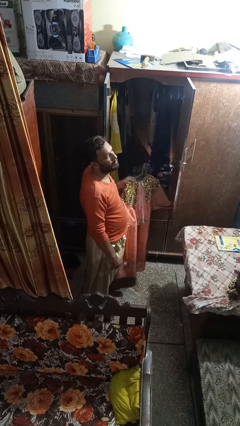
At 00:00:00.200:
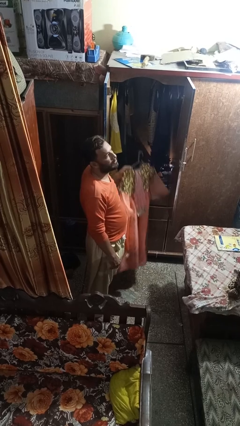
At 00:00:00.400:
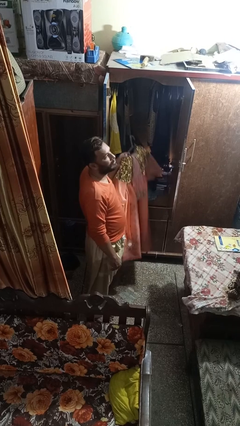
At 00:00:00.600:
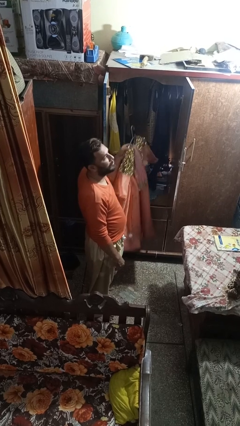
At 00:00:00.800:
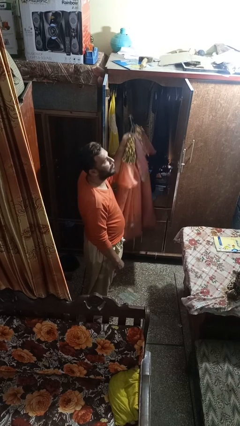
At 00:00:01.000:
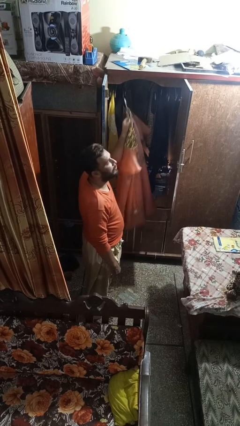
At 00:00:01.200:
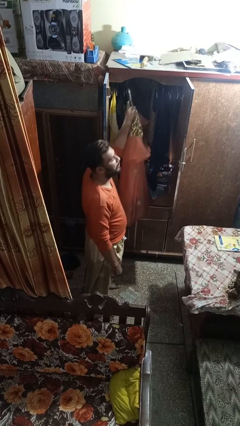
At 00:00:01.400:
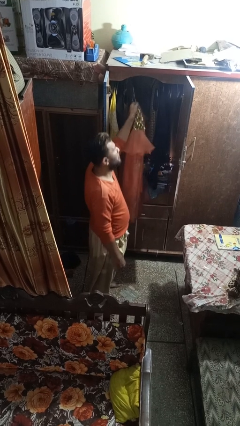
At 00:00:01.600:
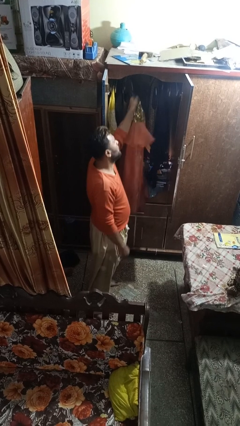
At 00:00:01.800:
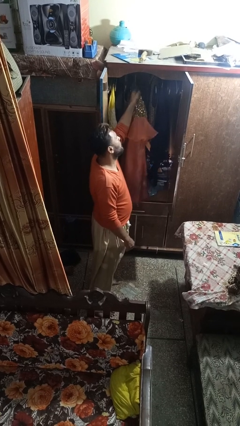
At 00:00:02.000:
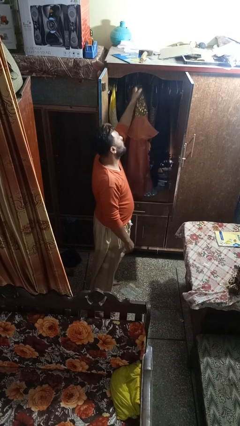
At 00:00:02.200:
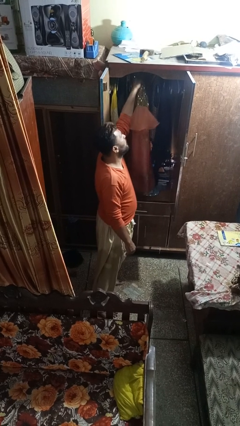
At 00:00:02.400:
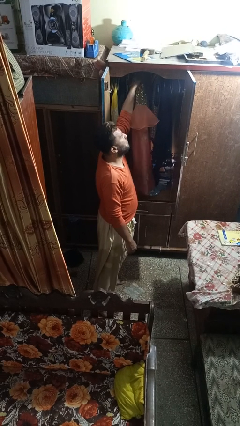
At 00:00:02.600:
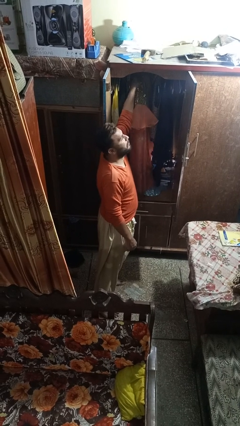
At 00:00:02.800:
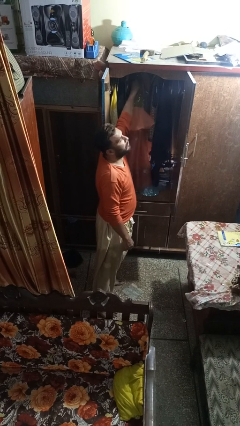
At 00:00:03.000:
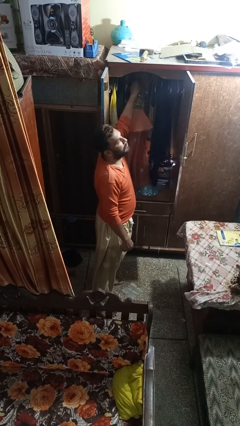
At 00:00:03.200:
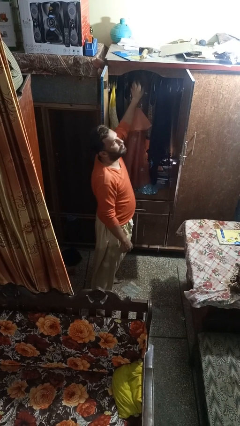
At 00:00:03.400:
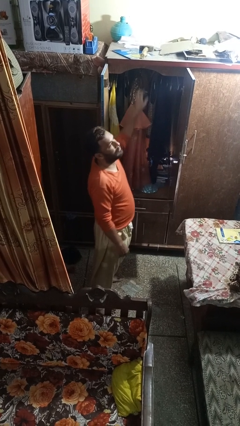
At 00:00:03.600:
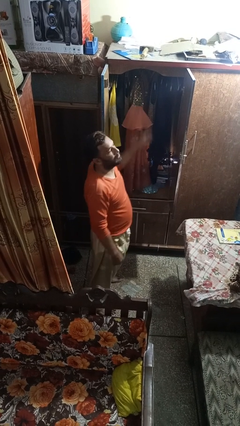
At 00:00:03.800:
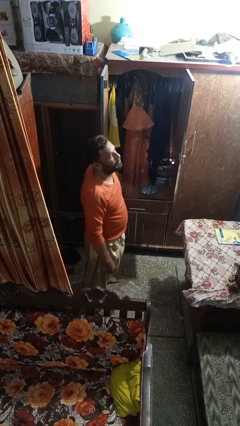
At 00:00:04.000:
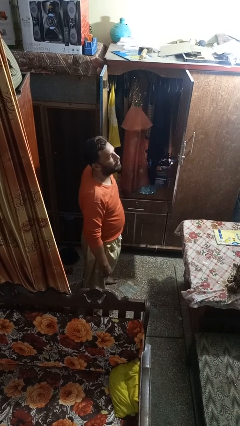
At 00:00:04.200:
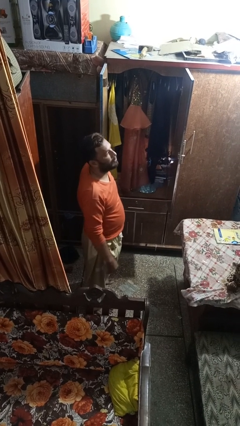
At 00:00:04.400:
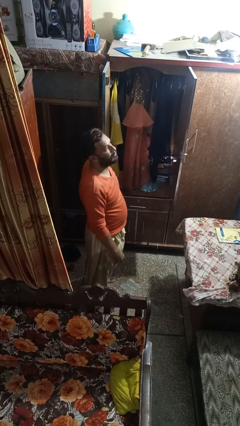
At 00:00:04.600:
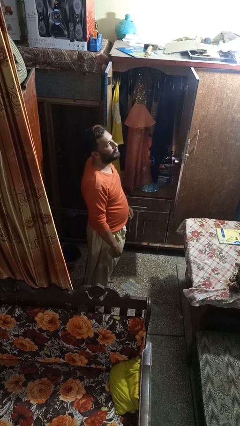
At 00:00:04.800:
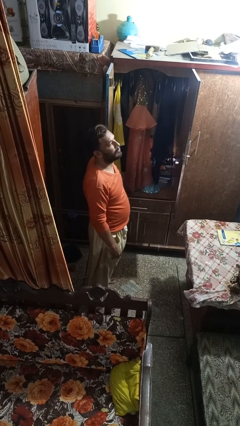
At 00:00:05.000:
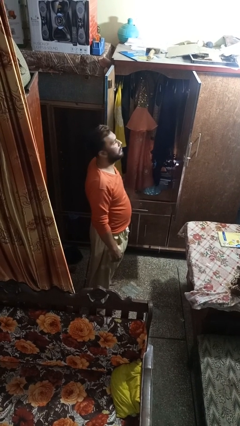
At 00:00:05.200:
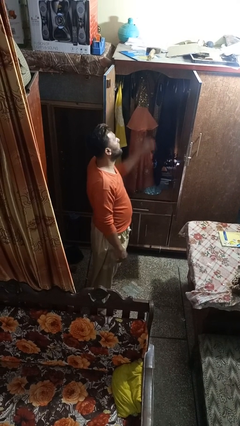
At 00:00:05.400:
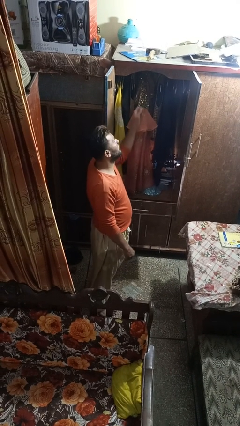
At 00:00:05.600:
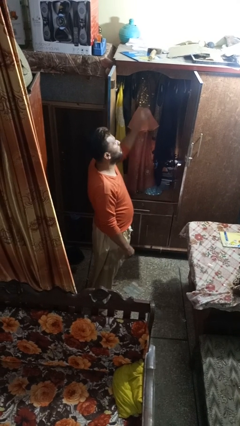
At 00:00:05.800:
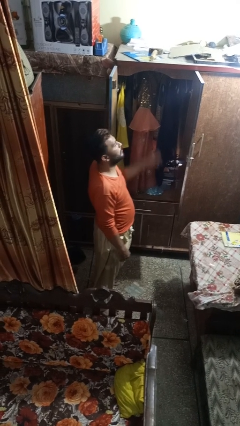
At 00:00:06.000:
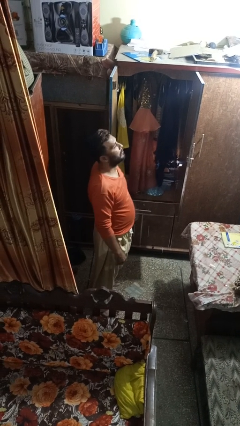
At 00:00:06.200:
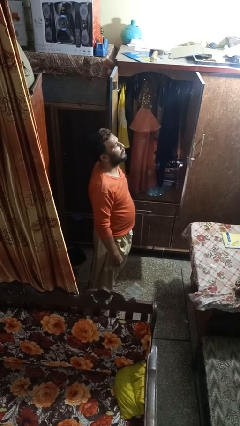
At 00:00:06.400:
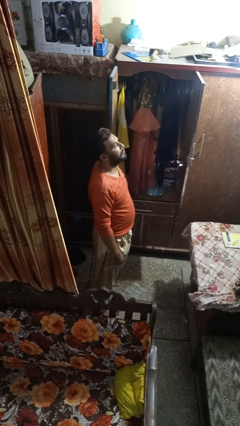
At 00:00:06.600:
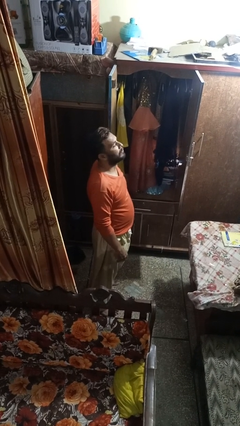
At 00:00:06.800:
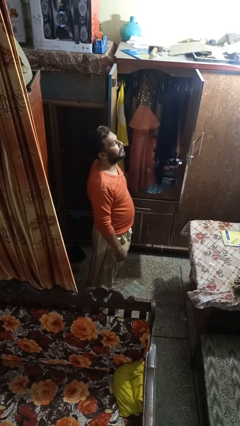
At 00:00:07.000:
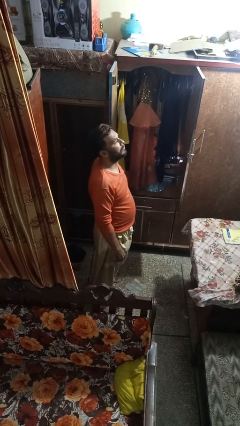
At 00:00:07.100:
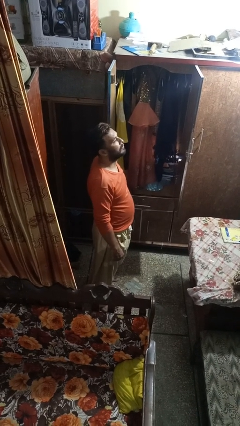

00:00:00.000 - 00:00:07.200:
person puts clothes into closet

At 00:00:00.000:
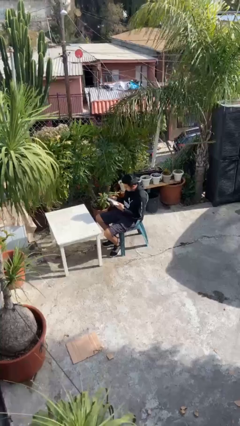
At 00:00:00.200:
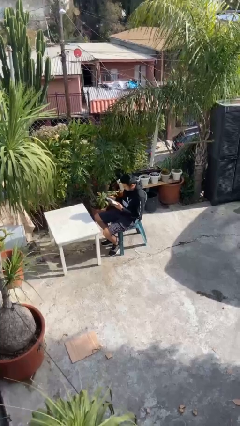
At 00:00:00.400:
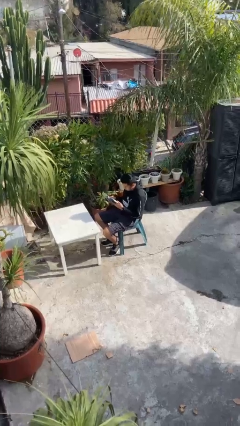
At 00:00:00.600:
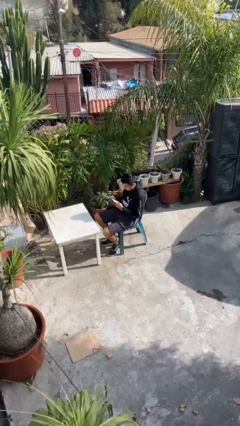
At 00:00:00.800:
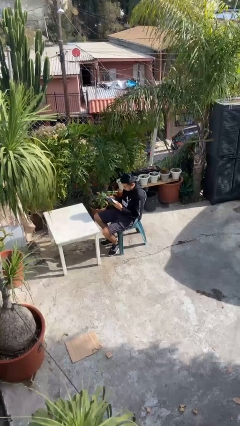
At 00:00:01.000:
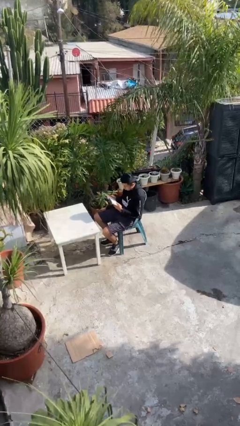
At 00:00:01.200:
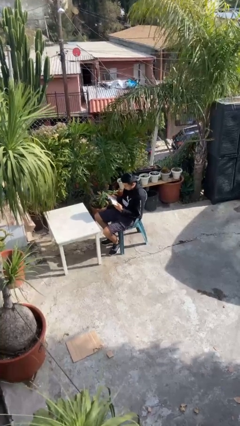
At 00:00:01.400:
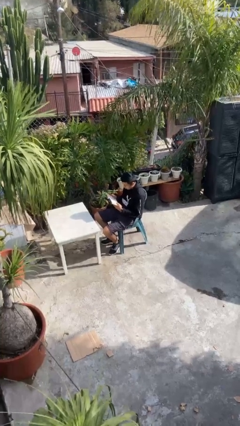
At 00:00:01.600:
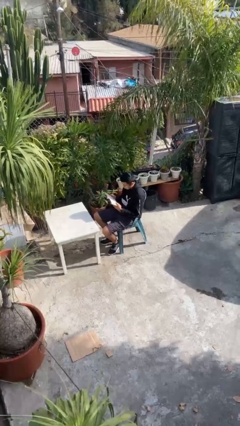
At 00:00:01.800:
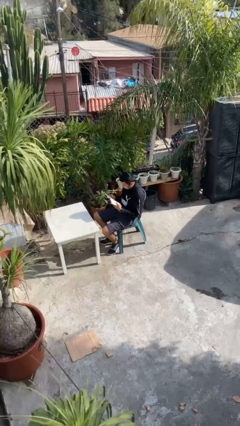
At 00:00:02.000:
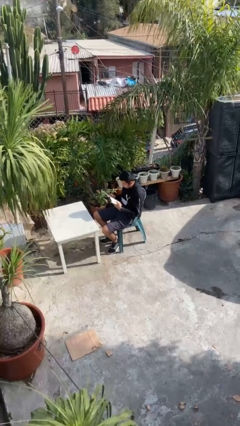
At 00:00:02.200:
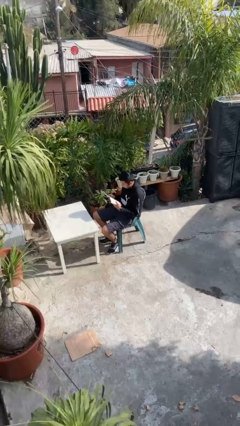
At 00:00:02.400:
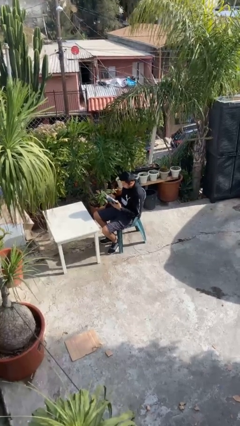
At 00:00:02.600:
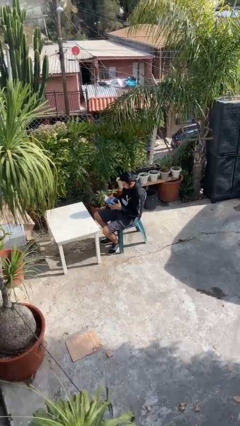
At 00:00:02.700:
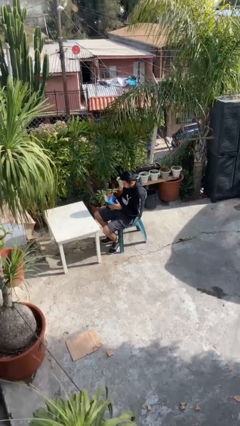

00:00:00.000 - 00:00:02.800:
person reads document

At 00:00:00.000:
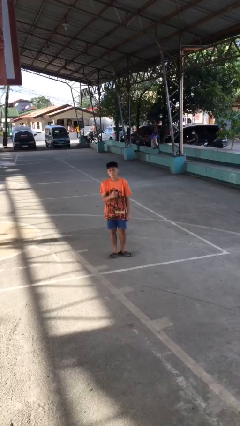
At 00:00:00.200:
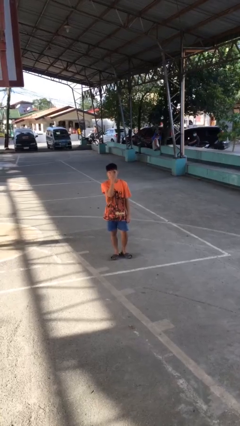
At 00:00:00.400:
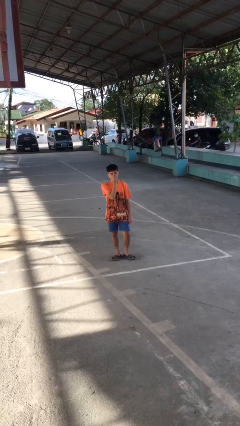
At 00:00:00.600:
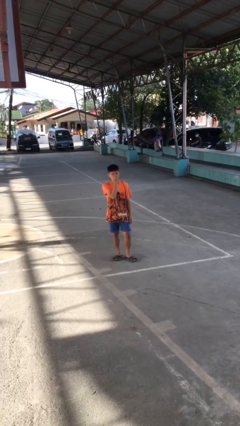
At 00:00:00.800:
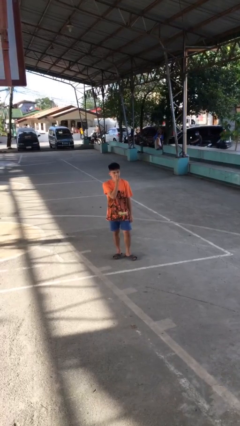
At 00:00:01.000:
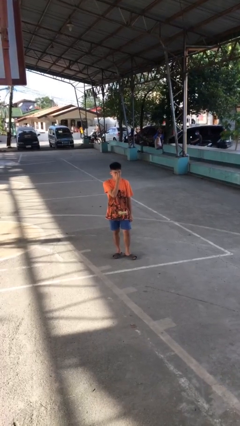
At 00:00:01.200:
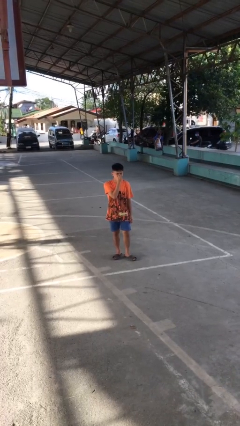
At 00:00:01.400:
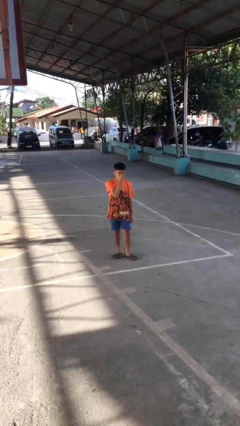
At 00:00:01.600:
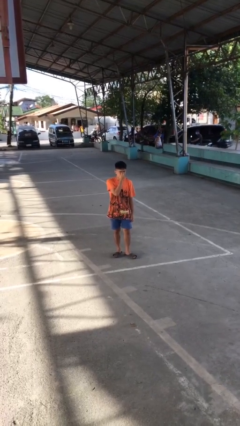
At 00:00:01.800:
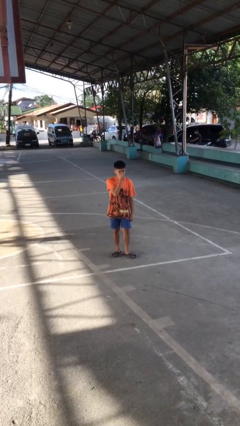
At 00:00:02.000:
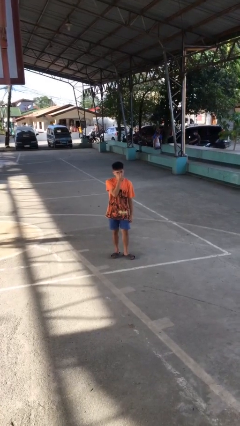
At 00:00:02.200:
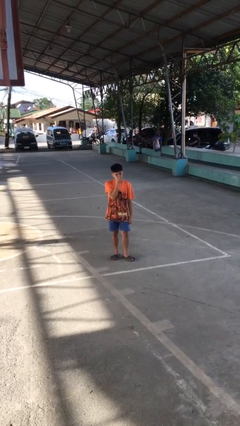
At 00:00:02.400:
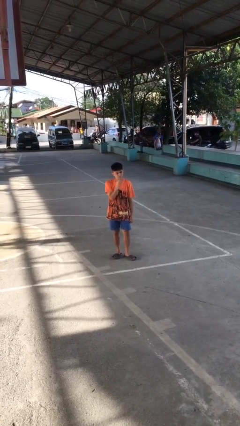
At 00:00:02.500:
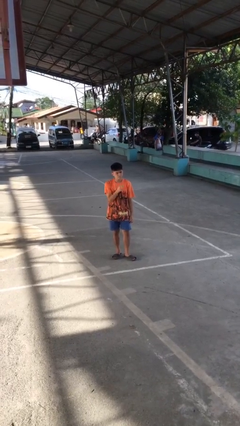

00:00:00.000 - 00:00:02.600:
person scratches face

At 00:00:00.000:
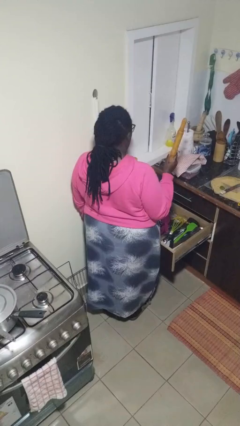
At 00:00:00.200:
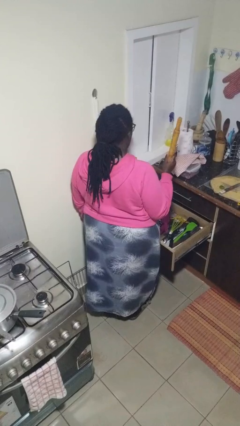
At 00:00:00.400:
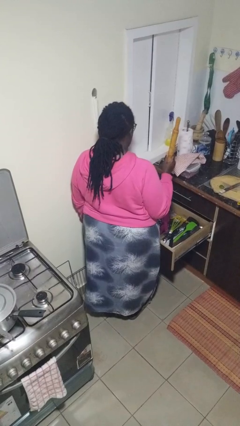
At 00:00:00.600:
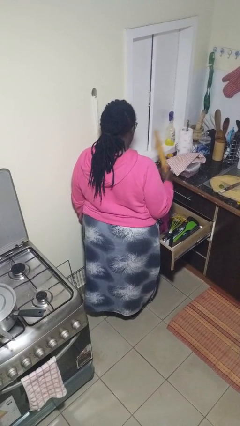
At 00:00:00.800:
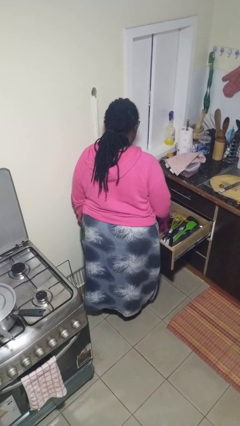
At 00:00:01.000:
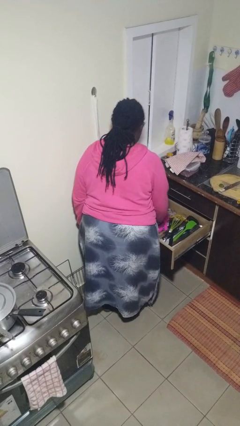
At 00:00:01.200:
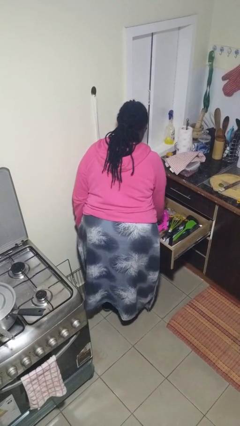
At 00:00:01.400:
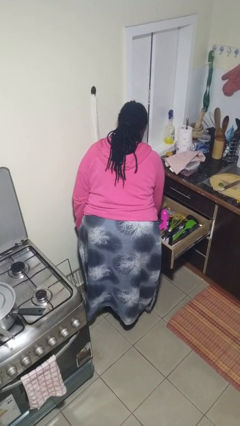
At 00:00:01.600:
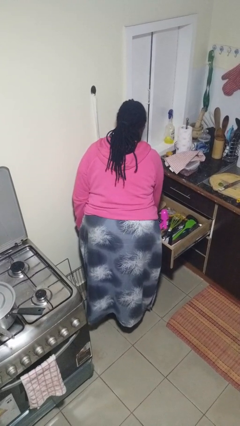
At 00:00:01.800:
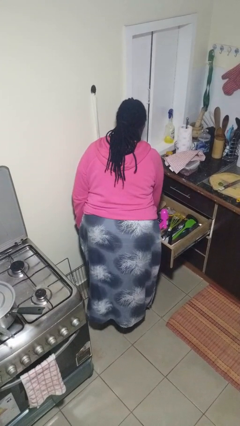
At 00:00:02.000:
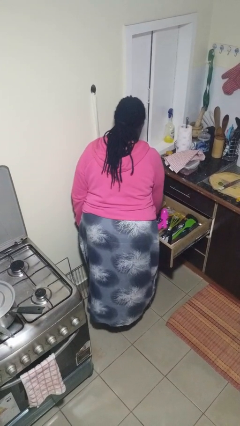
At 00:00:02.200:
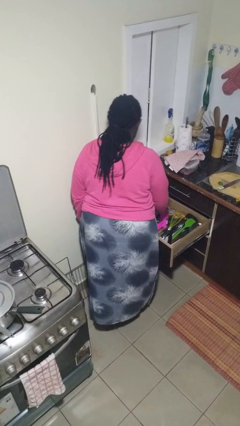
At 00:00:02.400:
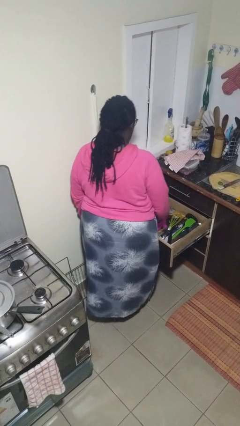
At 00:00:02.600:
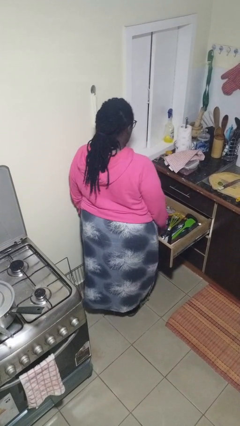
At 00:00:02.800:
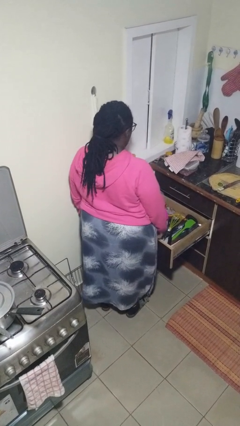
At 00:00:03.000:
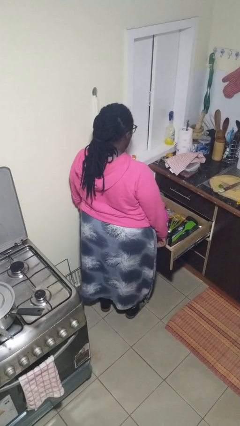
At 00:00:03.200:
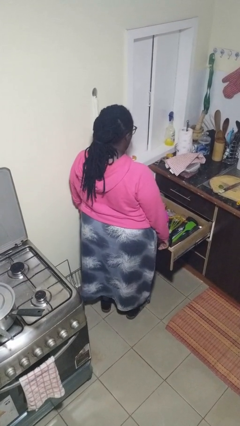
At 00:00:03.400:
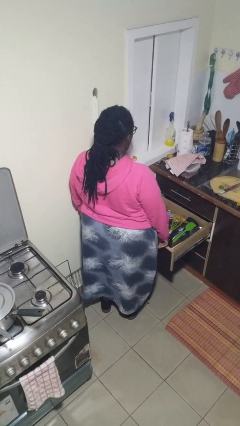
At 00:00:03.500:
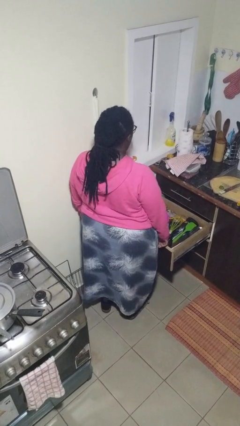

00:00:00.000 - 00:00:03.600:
person puts object into kitchen drawer

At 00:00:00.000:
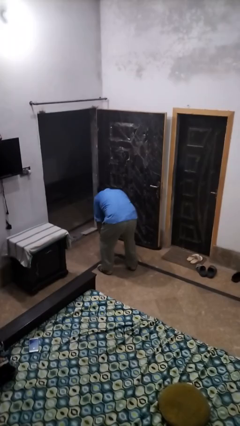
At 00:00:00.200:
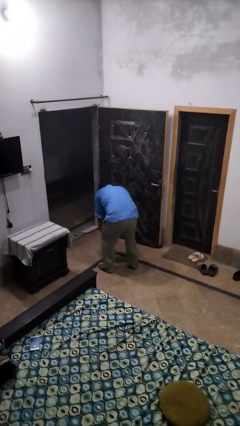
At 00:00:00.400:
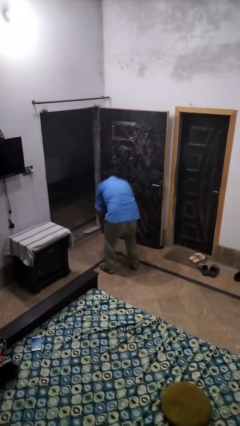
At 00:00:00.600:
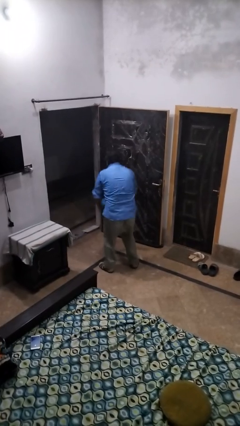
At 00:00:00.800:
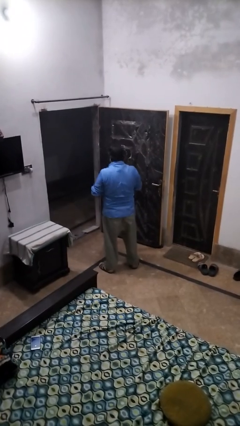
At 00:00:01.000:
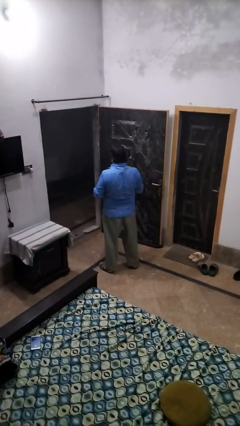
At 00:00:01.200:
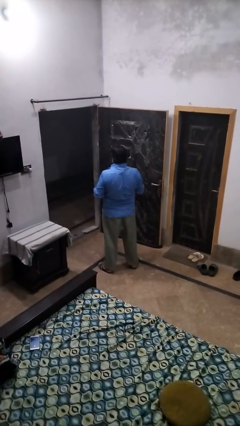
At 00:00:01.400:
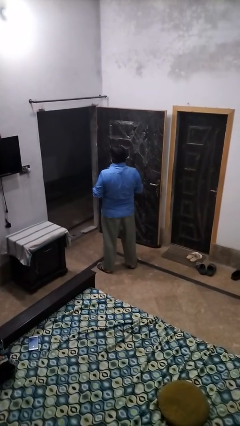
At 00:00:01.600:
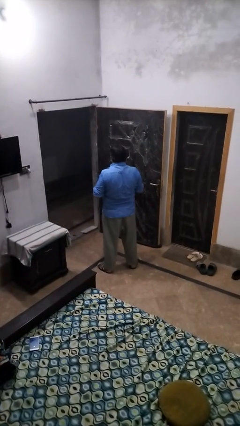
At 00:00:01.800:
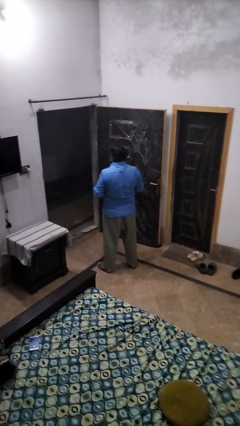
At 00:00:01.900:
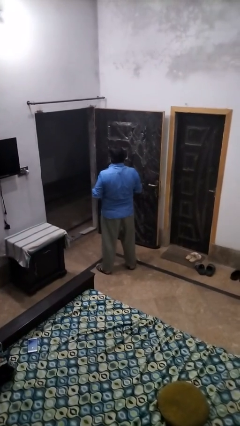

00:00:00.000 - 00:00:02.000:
person catches dropped object
